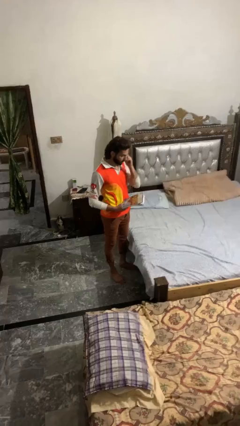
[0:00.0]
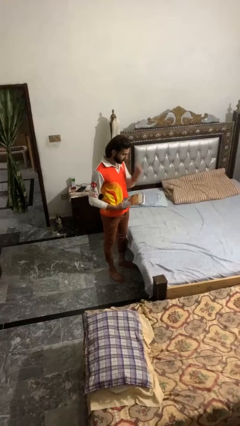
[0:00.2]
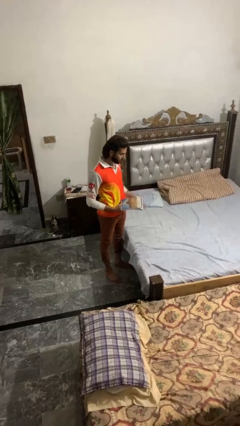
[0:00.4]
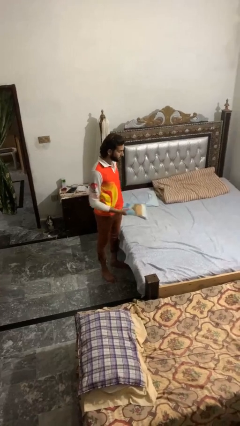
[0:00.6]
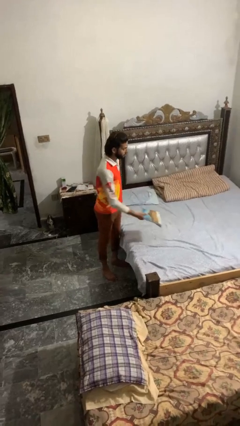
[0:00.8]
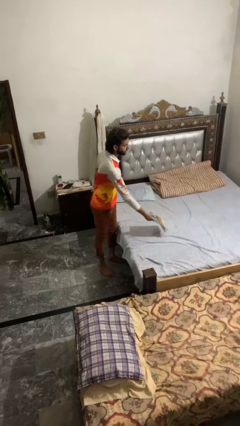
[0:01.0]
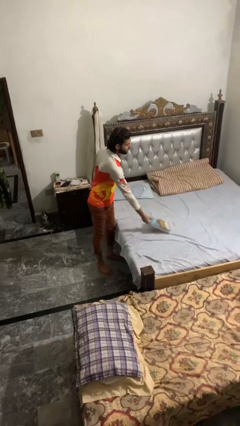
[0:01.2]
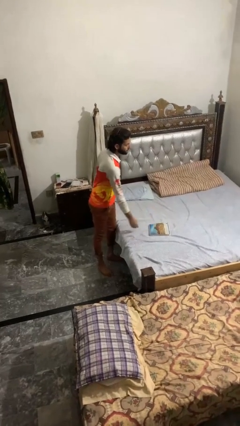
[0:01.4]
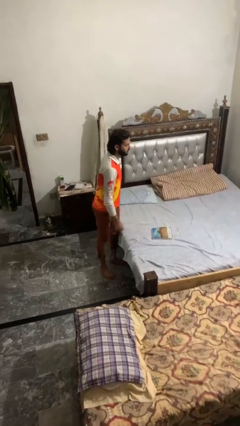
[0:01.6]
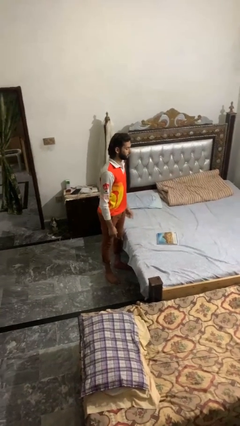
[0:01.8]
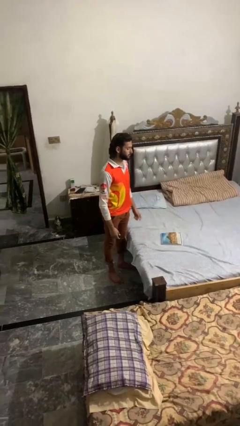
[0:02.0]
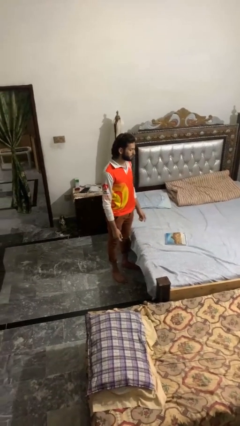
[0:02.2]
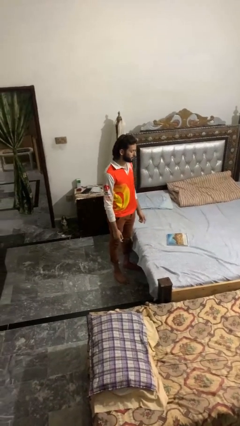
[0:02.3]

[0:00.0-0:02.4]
person puts down object on bed

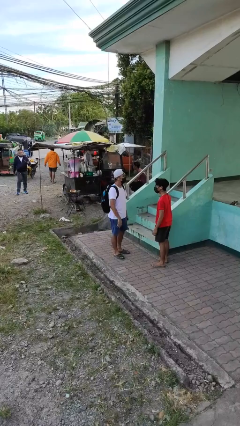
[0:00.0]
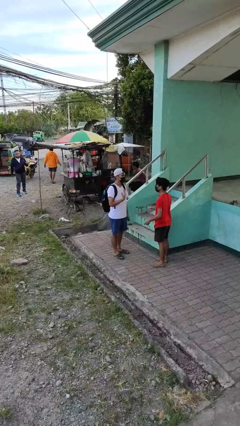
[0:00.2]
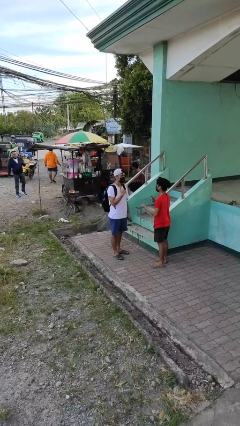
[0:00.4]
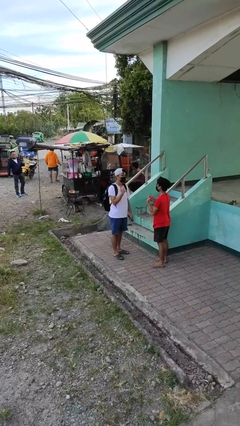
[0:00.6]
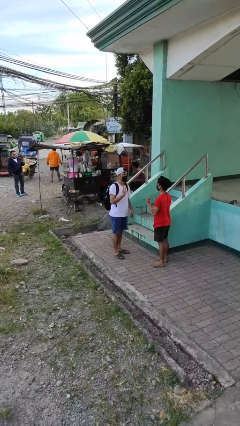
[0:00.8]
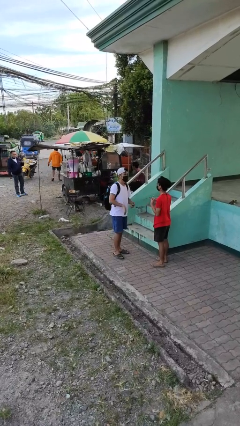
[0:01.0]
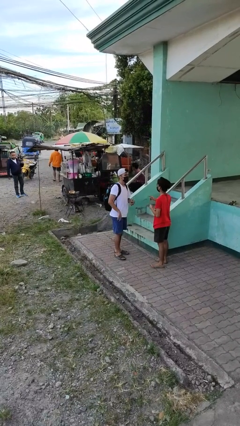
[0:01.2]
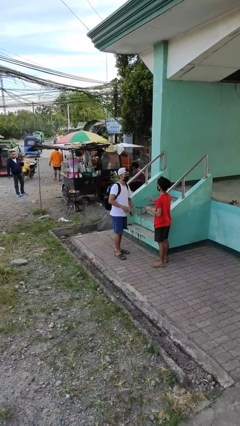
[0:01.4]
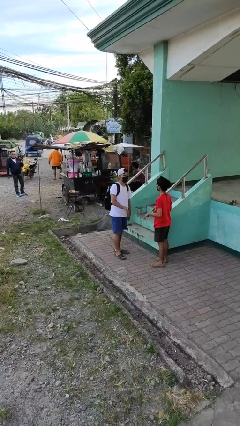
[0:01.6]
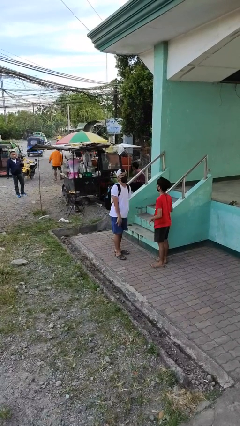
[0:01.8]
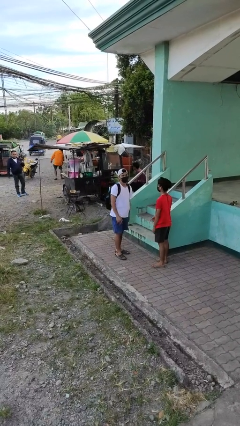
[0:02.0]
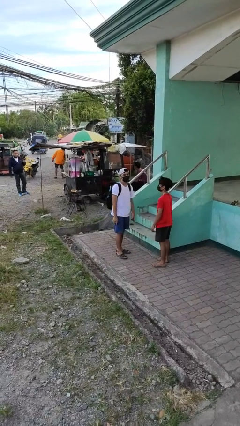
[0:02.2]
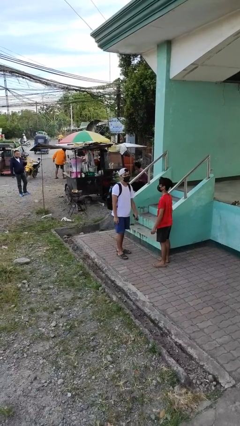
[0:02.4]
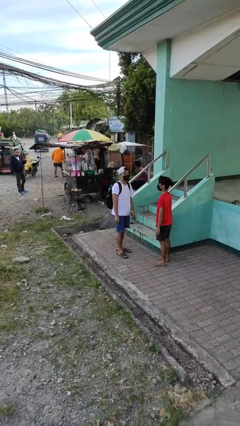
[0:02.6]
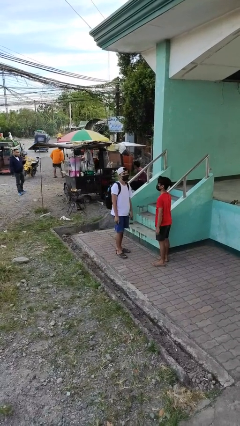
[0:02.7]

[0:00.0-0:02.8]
person talks to person

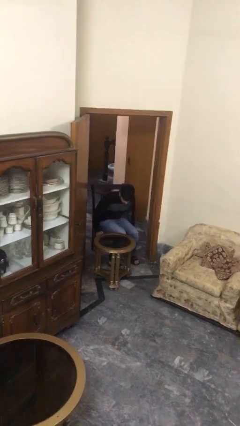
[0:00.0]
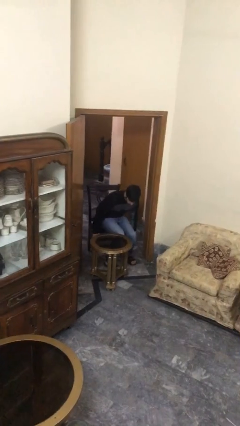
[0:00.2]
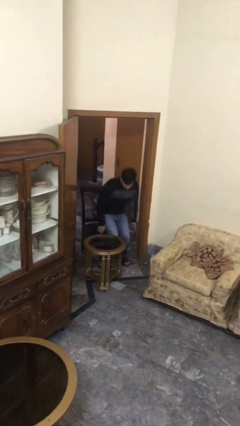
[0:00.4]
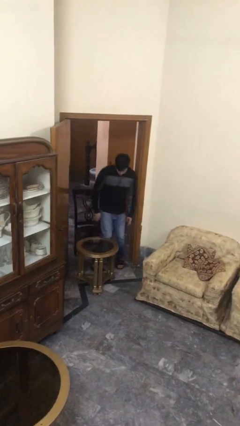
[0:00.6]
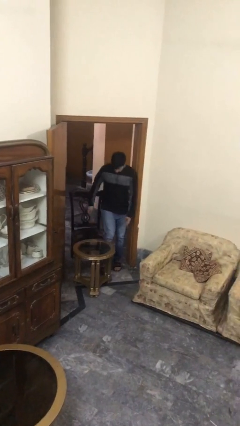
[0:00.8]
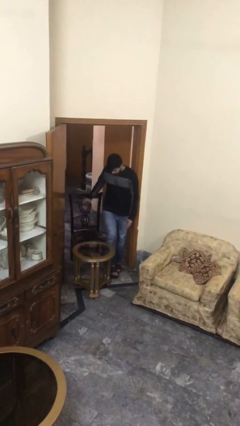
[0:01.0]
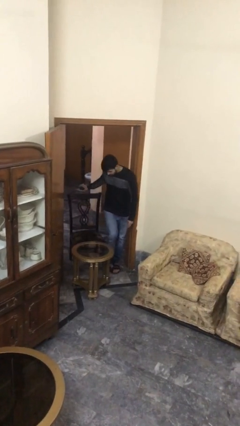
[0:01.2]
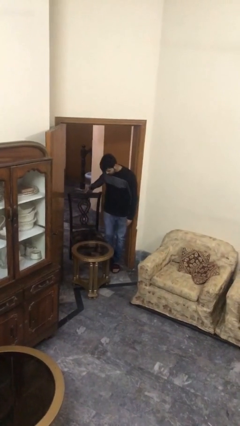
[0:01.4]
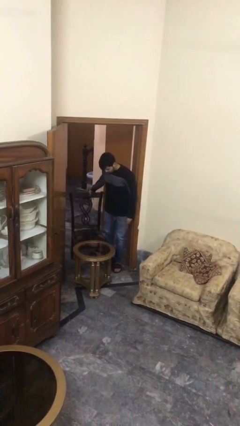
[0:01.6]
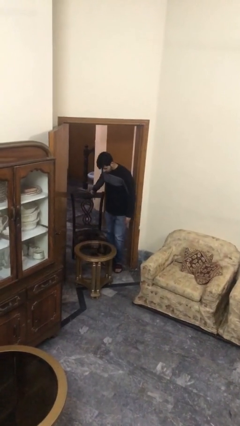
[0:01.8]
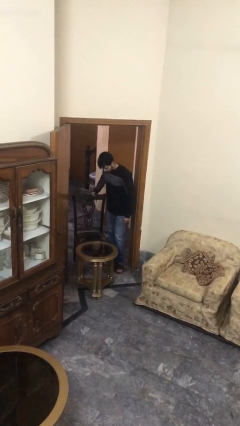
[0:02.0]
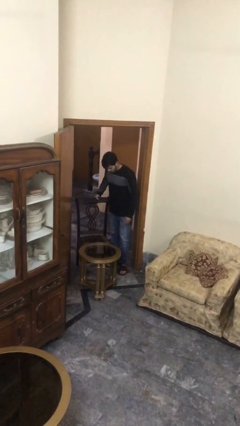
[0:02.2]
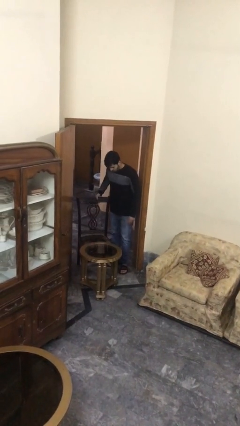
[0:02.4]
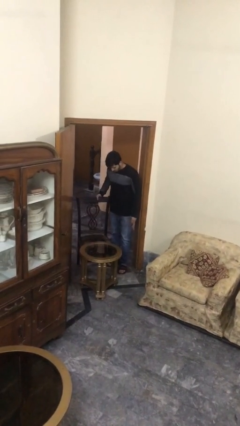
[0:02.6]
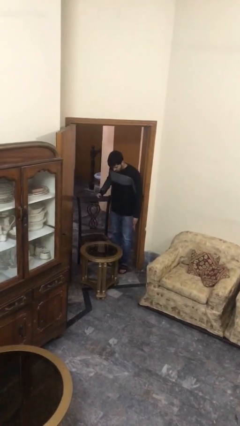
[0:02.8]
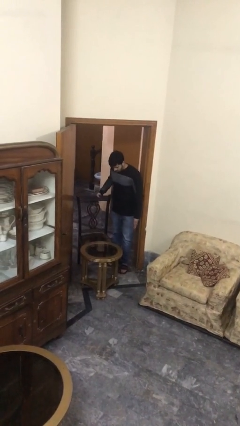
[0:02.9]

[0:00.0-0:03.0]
person stands up

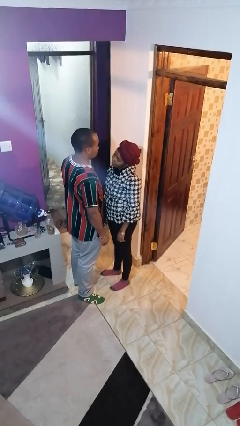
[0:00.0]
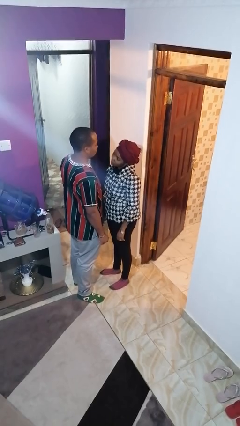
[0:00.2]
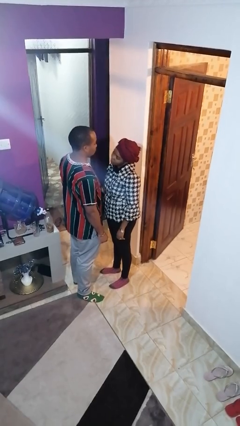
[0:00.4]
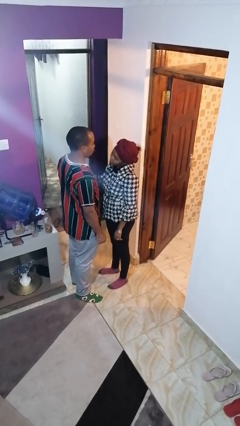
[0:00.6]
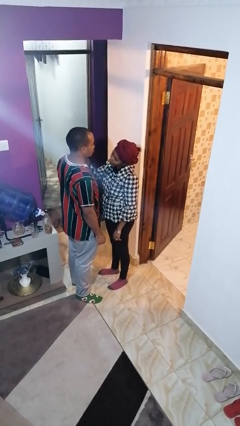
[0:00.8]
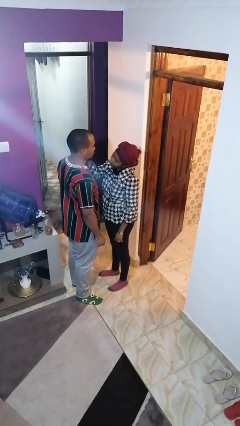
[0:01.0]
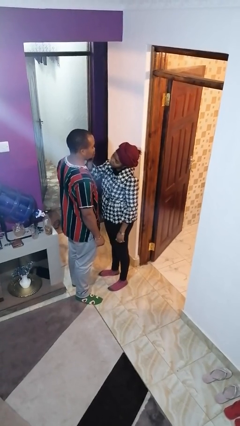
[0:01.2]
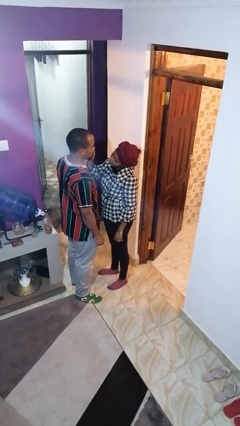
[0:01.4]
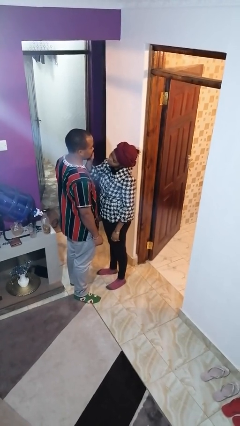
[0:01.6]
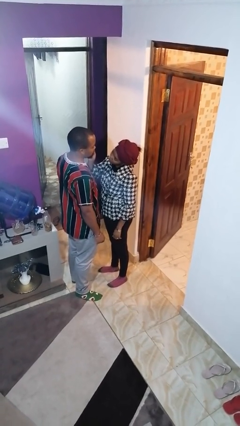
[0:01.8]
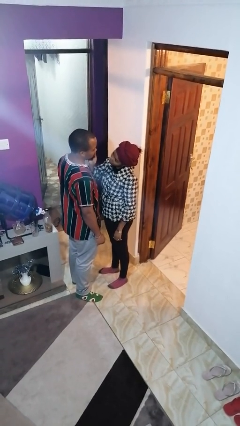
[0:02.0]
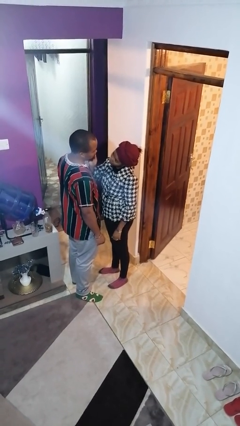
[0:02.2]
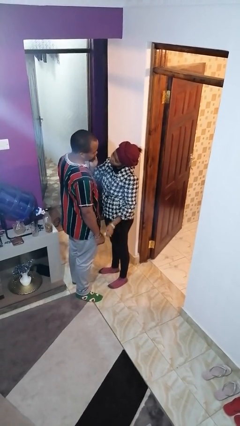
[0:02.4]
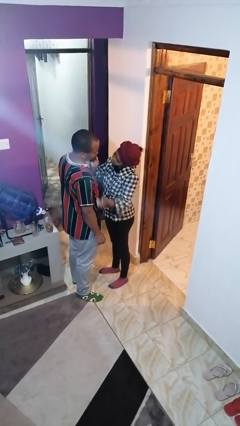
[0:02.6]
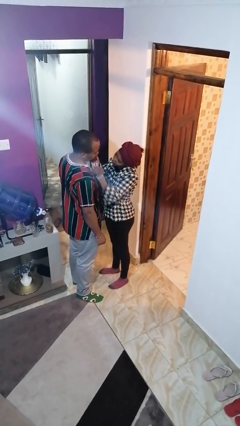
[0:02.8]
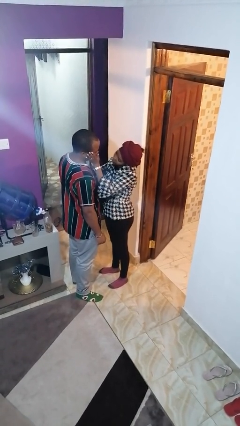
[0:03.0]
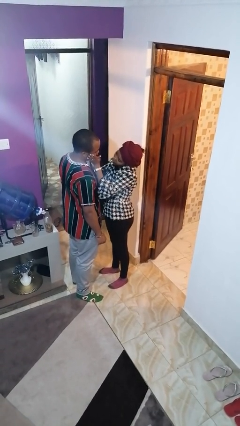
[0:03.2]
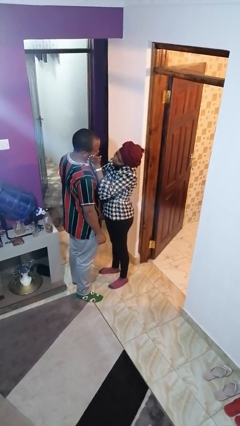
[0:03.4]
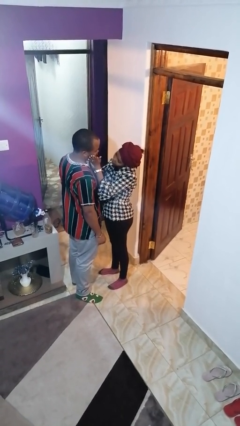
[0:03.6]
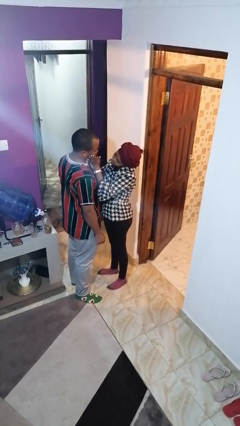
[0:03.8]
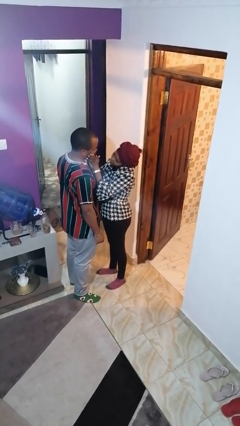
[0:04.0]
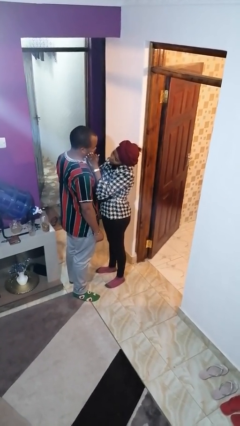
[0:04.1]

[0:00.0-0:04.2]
person touches face of person

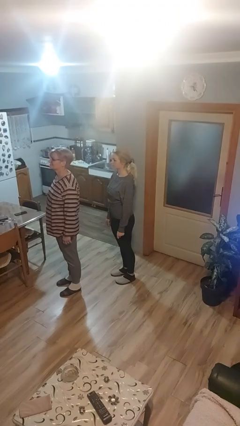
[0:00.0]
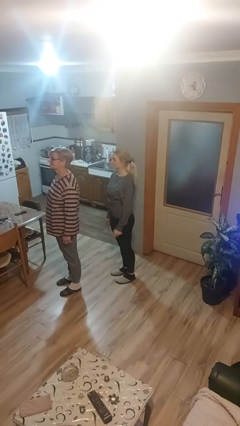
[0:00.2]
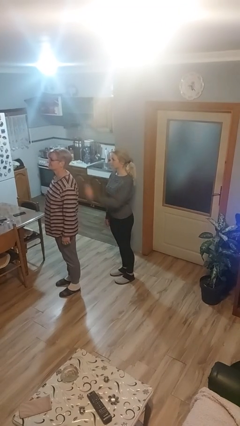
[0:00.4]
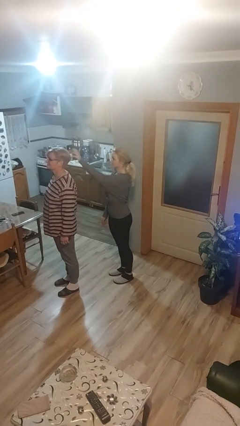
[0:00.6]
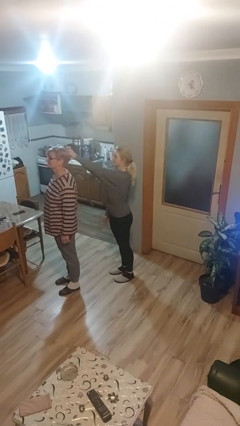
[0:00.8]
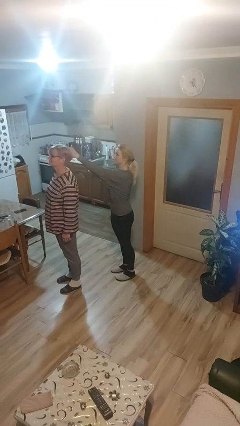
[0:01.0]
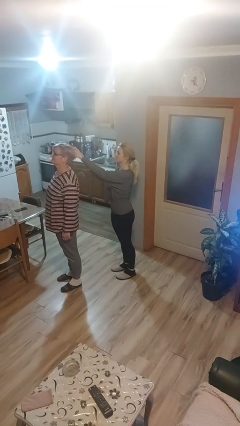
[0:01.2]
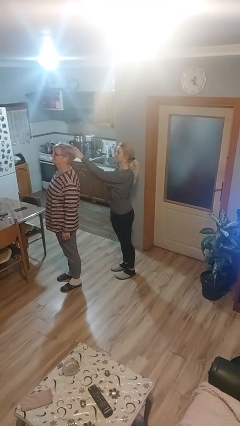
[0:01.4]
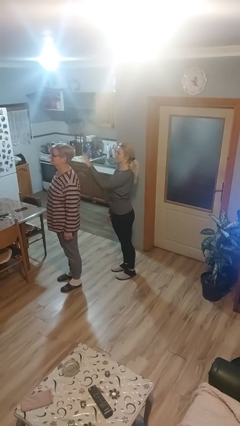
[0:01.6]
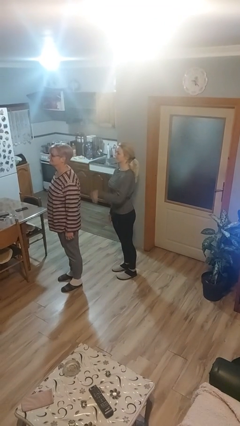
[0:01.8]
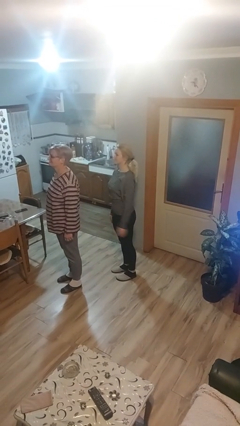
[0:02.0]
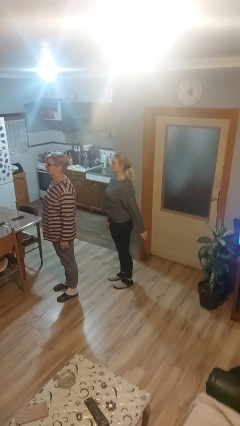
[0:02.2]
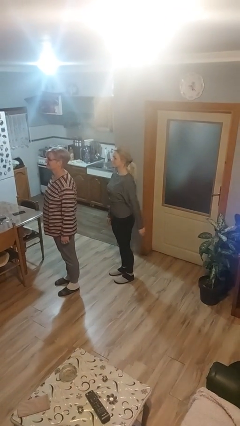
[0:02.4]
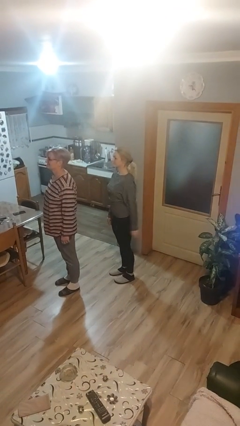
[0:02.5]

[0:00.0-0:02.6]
person grabs person by hair

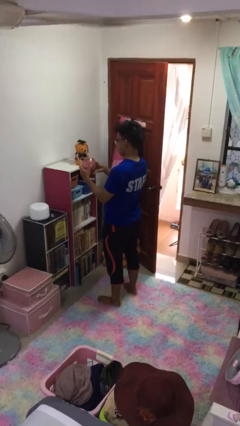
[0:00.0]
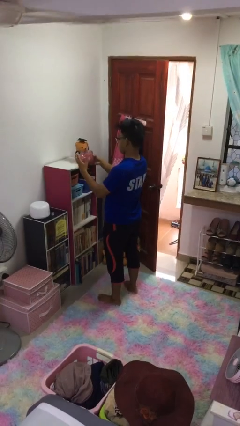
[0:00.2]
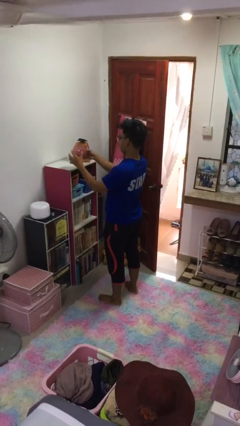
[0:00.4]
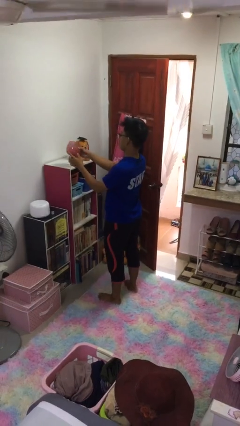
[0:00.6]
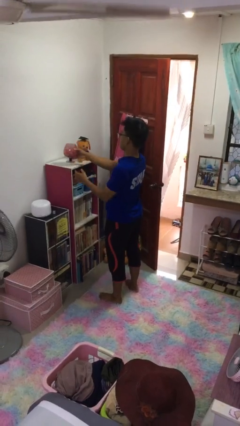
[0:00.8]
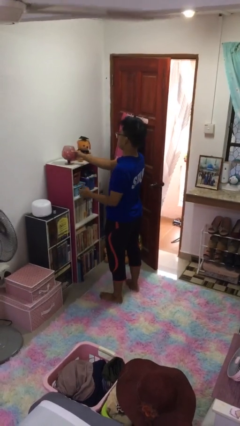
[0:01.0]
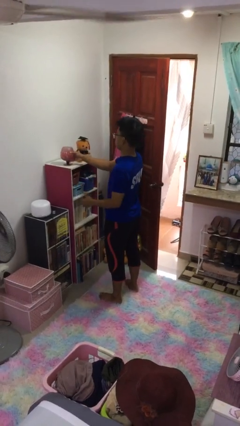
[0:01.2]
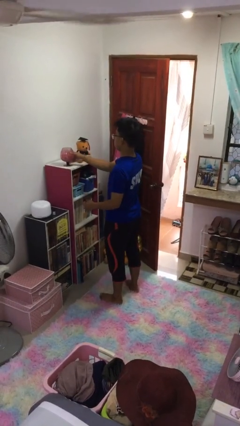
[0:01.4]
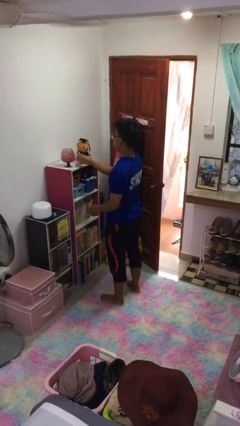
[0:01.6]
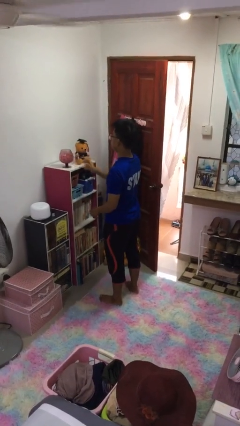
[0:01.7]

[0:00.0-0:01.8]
person puts down object on shelf

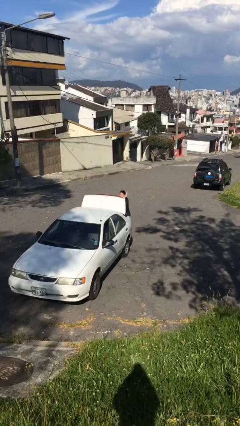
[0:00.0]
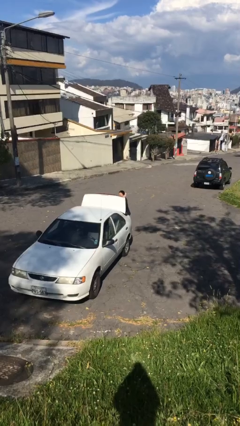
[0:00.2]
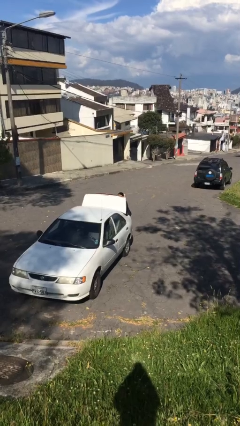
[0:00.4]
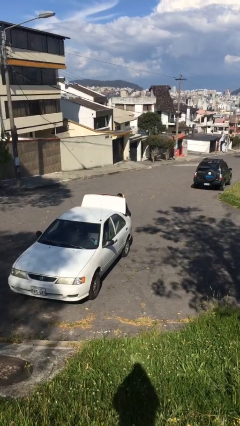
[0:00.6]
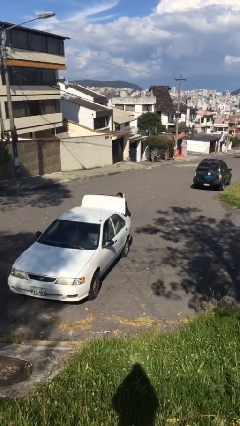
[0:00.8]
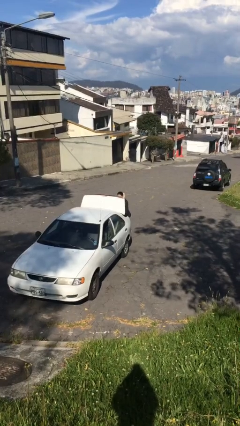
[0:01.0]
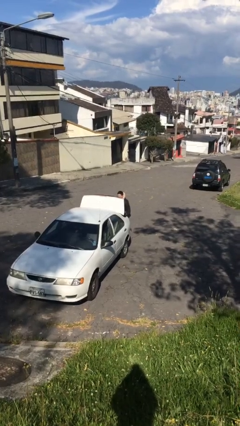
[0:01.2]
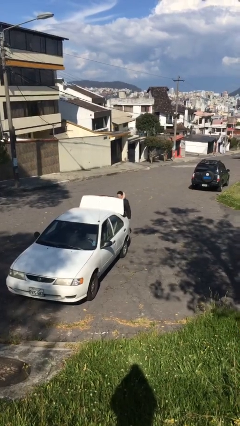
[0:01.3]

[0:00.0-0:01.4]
person loads car
